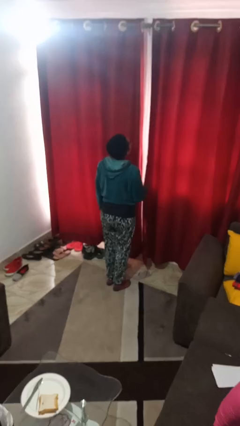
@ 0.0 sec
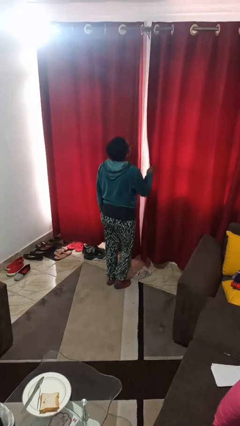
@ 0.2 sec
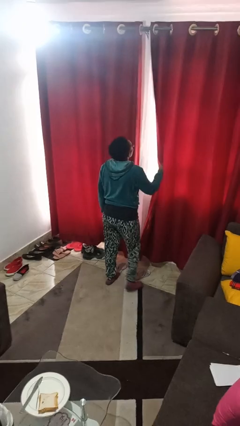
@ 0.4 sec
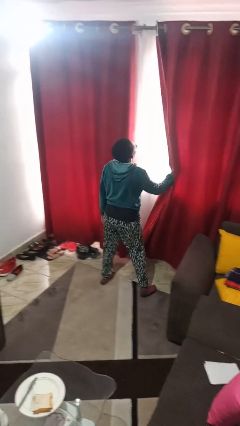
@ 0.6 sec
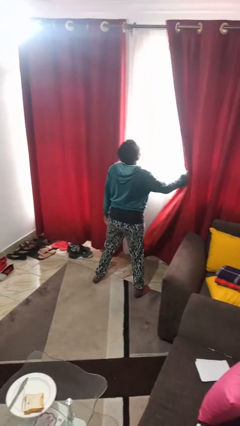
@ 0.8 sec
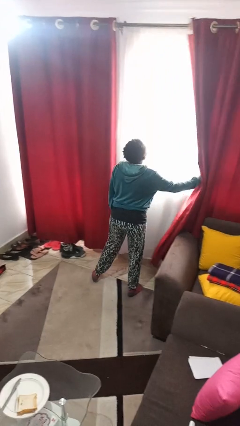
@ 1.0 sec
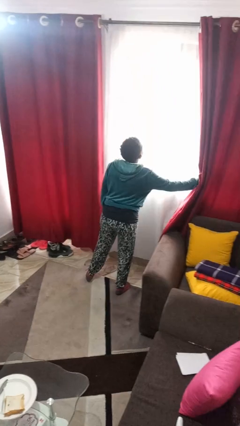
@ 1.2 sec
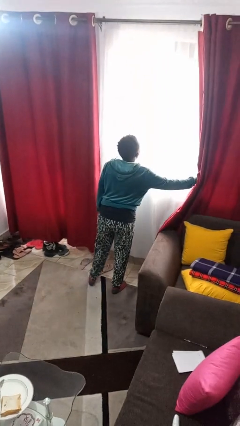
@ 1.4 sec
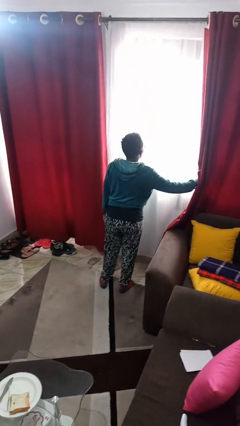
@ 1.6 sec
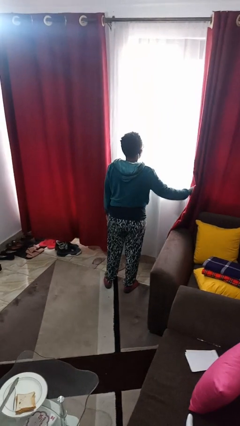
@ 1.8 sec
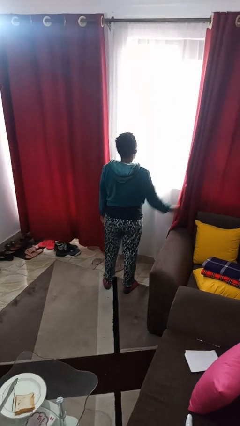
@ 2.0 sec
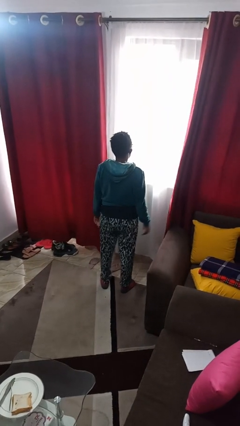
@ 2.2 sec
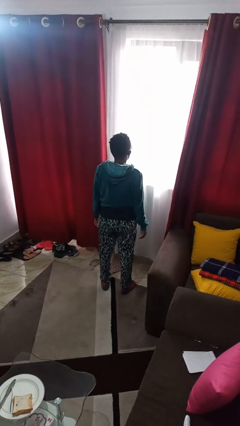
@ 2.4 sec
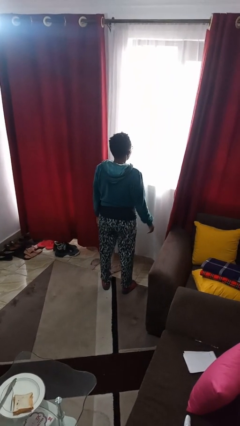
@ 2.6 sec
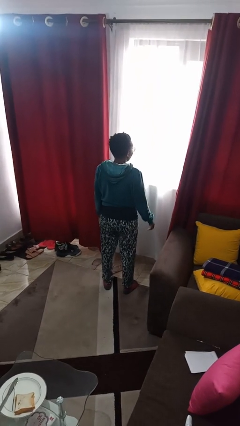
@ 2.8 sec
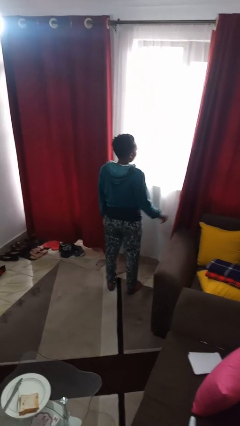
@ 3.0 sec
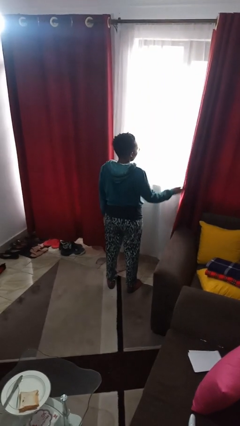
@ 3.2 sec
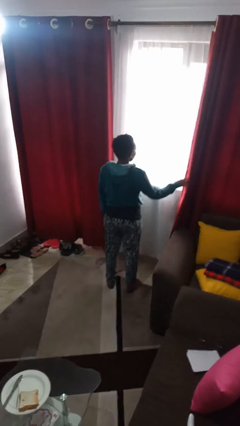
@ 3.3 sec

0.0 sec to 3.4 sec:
person opens curtains

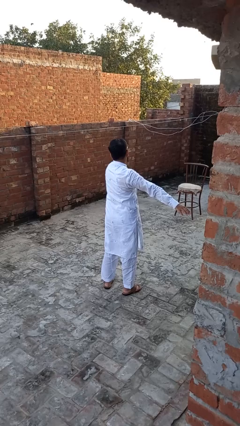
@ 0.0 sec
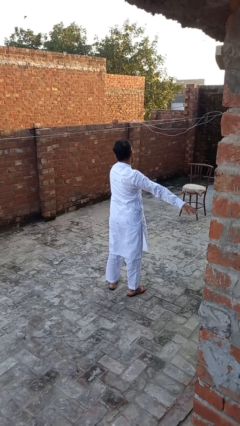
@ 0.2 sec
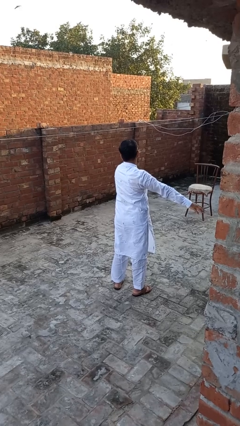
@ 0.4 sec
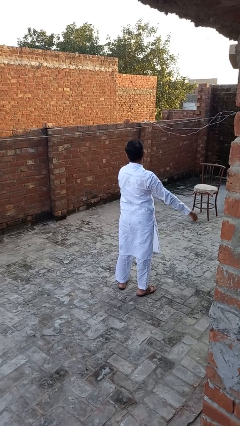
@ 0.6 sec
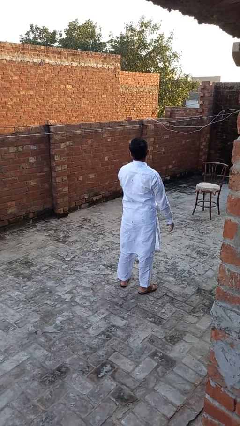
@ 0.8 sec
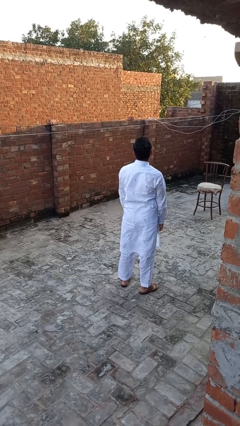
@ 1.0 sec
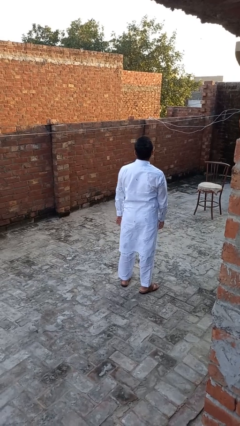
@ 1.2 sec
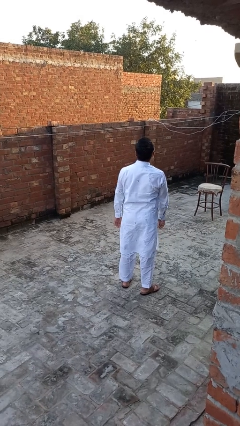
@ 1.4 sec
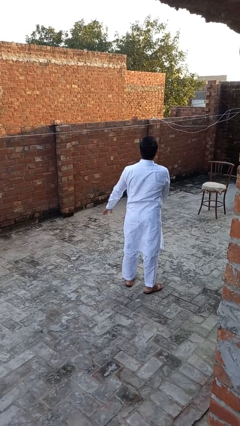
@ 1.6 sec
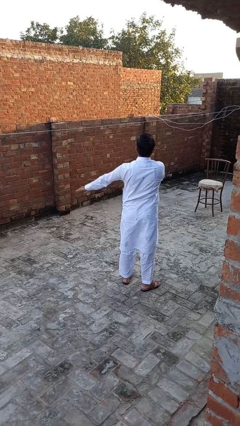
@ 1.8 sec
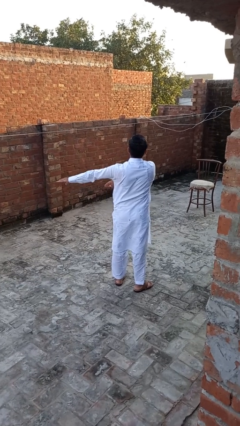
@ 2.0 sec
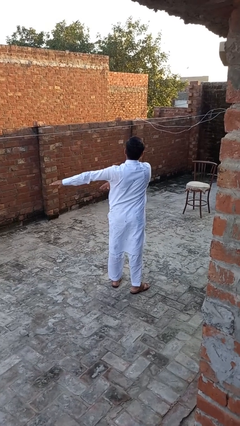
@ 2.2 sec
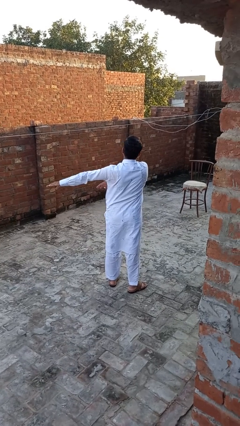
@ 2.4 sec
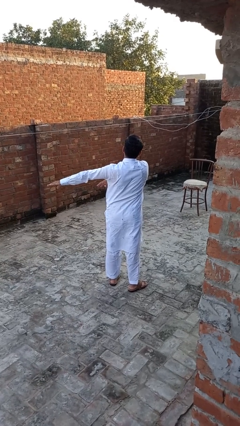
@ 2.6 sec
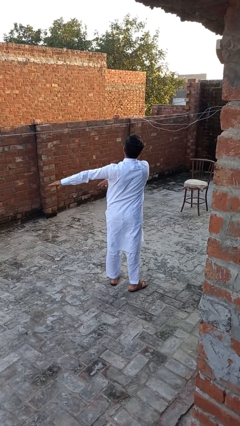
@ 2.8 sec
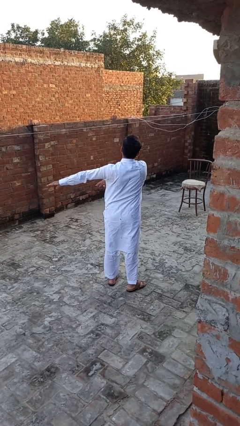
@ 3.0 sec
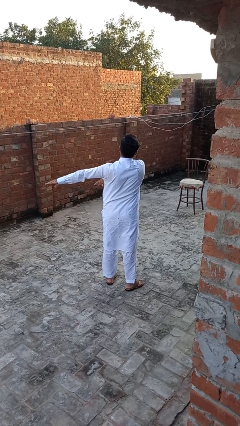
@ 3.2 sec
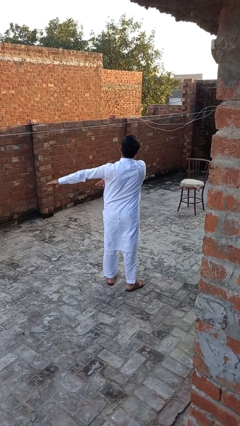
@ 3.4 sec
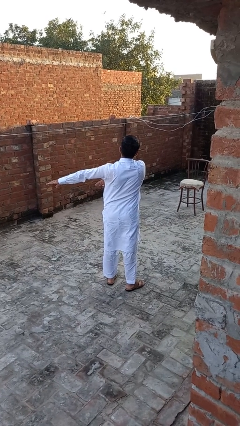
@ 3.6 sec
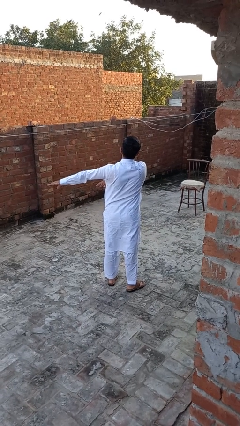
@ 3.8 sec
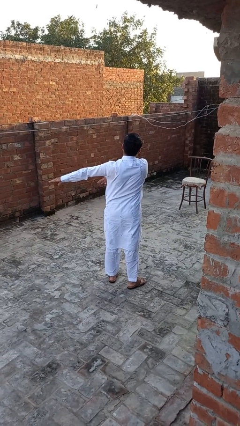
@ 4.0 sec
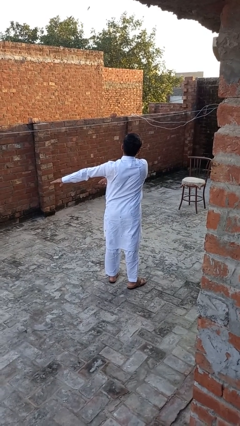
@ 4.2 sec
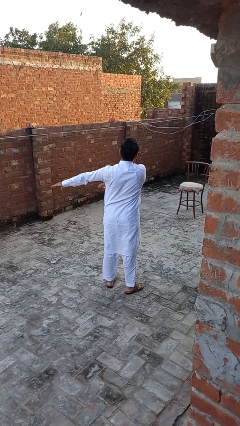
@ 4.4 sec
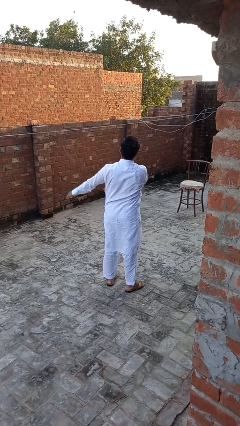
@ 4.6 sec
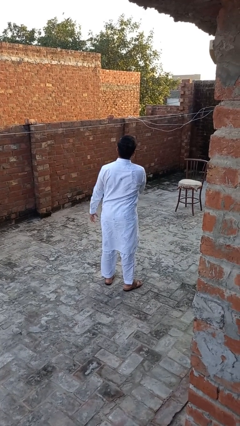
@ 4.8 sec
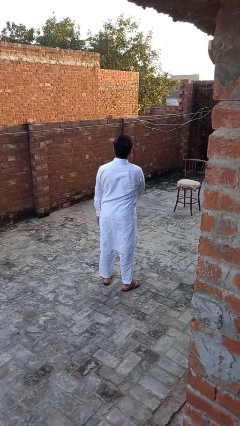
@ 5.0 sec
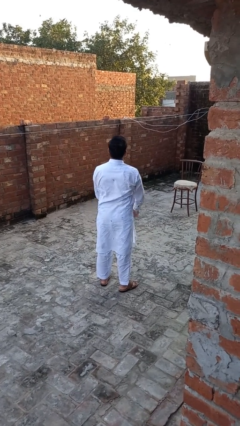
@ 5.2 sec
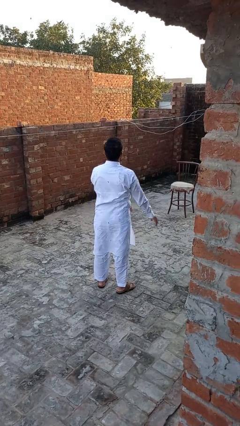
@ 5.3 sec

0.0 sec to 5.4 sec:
person gestures swipe left

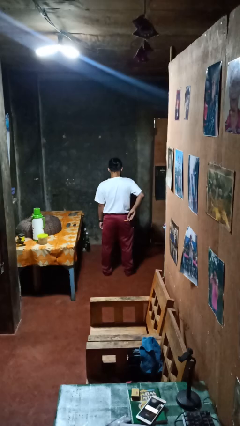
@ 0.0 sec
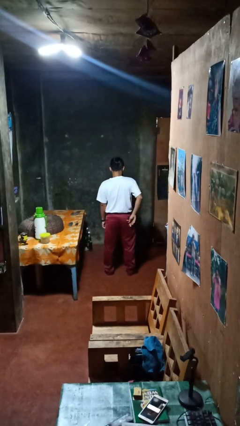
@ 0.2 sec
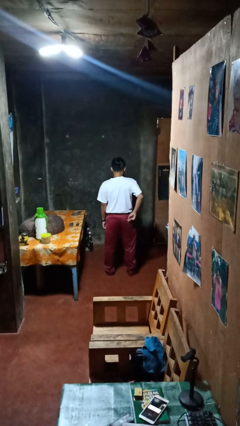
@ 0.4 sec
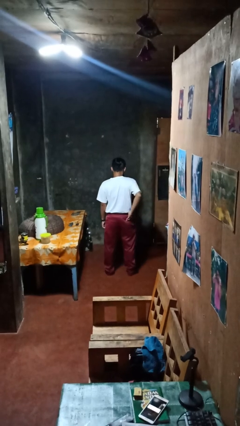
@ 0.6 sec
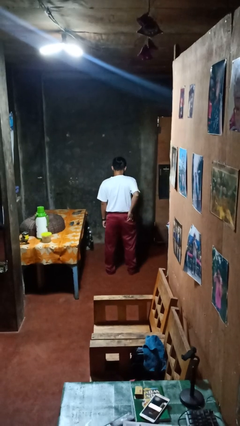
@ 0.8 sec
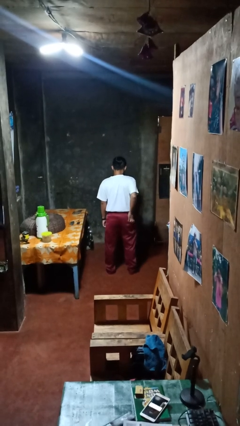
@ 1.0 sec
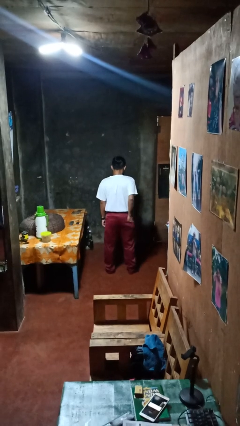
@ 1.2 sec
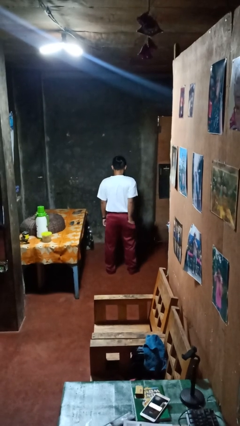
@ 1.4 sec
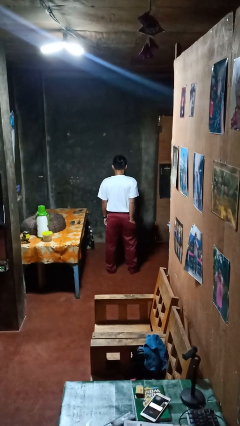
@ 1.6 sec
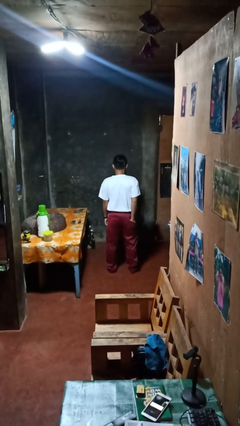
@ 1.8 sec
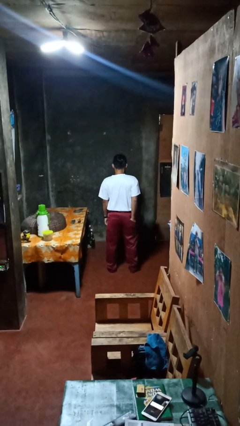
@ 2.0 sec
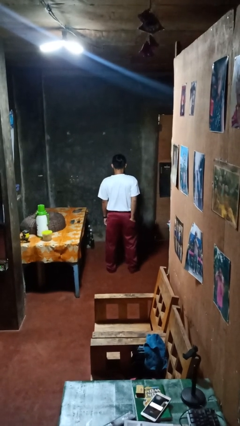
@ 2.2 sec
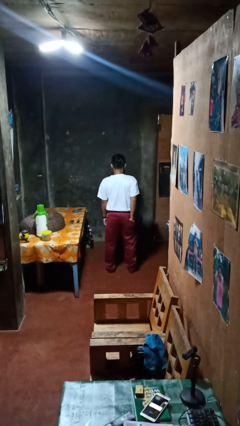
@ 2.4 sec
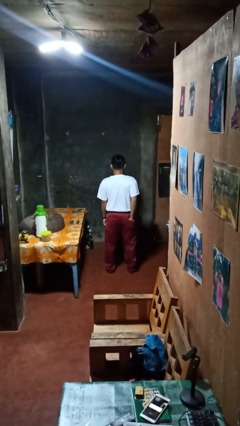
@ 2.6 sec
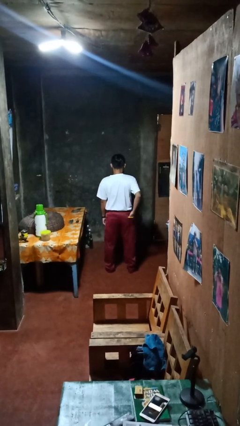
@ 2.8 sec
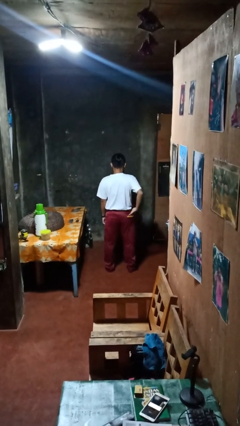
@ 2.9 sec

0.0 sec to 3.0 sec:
person puts hands in back pockets

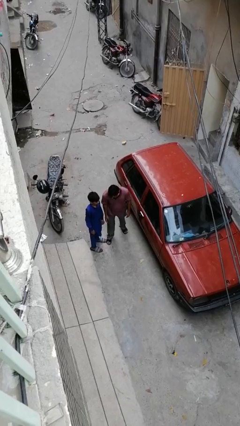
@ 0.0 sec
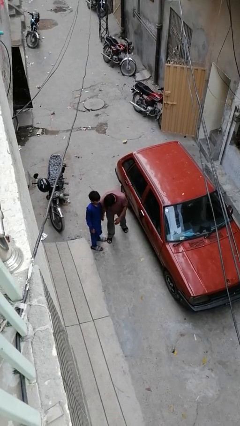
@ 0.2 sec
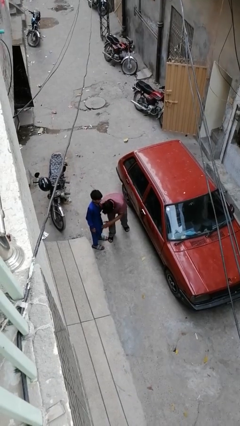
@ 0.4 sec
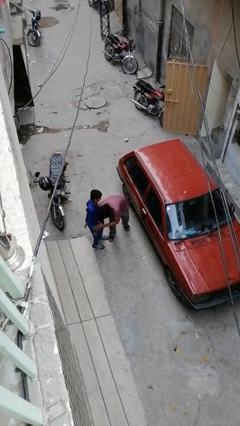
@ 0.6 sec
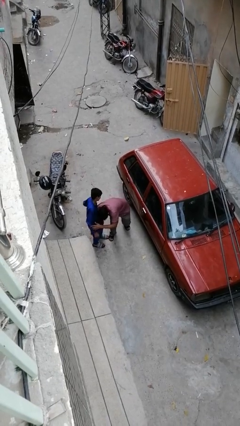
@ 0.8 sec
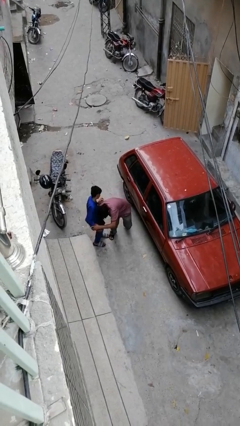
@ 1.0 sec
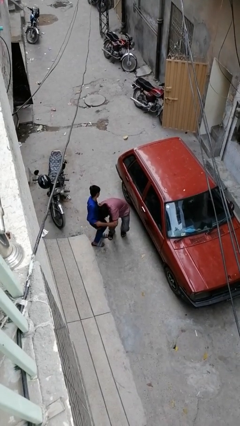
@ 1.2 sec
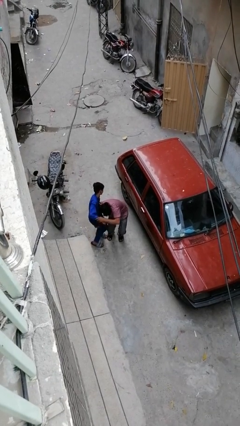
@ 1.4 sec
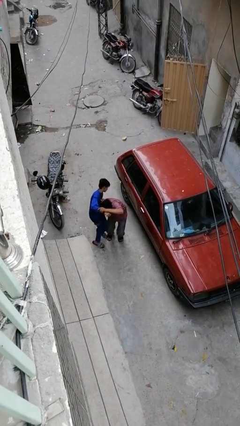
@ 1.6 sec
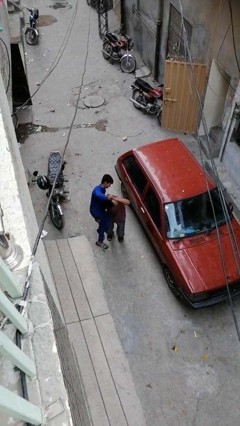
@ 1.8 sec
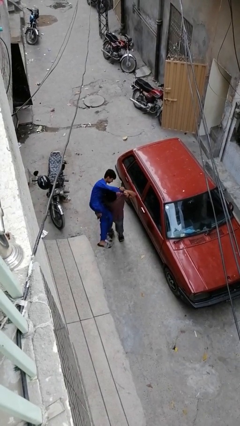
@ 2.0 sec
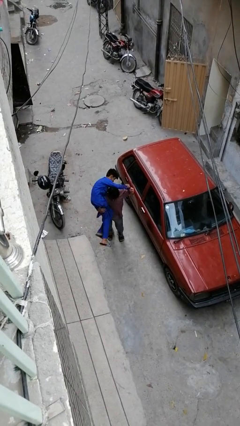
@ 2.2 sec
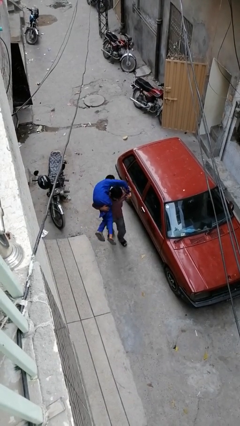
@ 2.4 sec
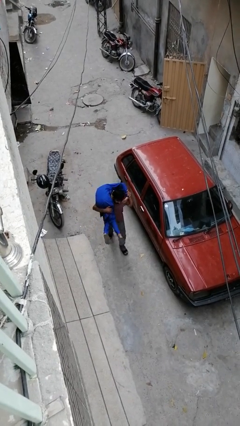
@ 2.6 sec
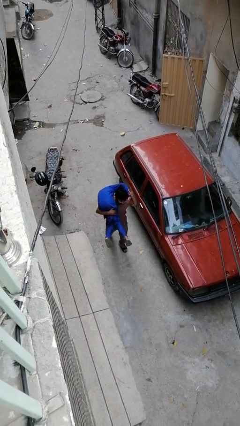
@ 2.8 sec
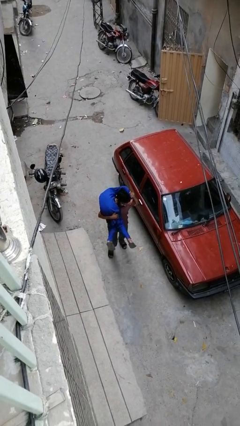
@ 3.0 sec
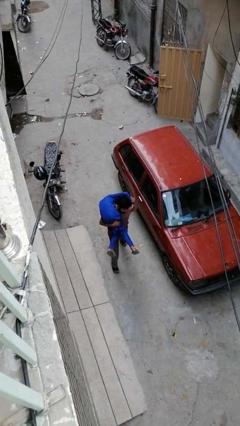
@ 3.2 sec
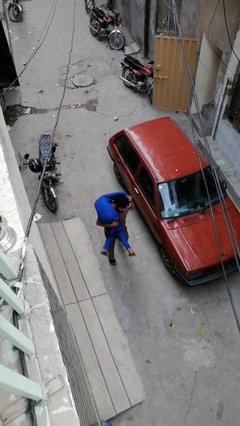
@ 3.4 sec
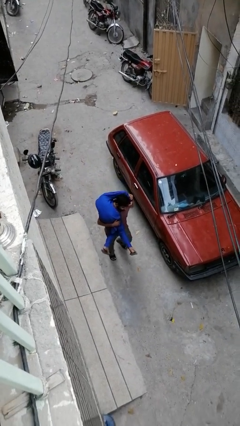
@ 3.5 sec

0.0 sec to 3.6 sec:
person carries person over shoulder

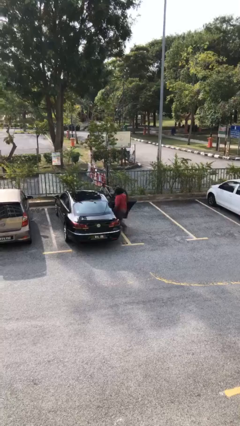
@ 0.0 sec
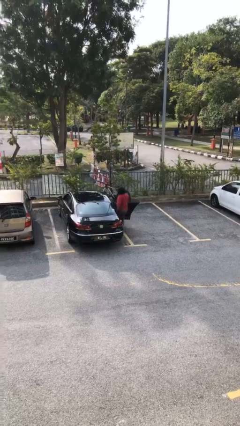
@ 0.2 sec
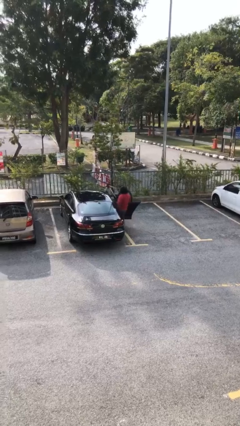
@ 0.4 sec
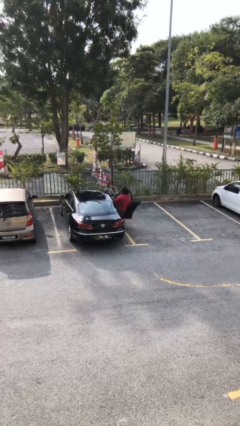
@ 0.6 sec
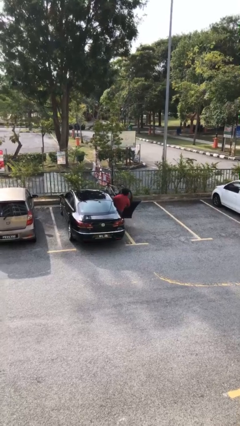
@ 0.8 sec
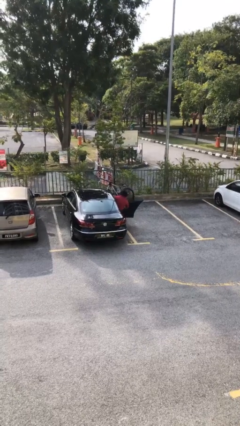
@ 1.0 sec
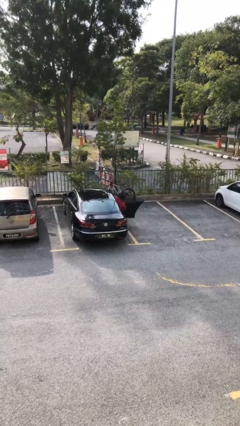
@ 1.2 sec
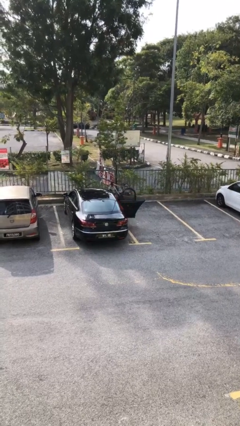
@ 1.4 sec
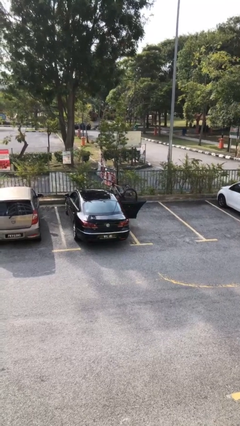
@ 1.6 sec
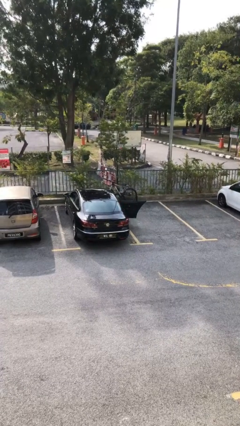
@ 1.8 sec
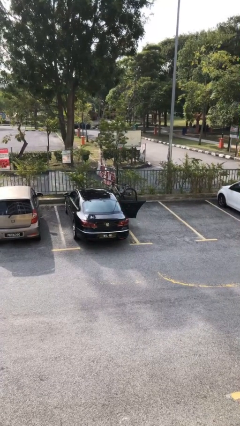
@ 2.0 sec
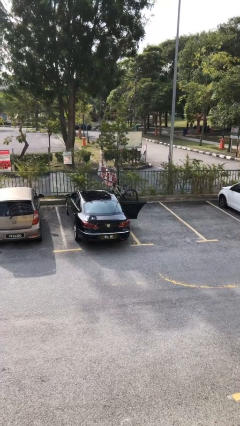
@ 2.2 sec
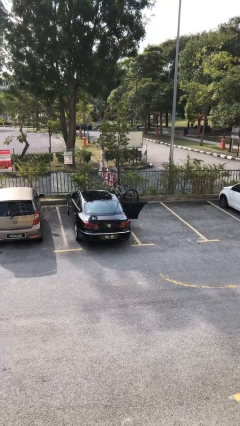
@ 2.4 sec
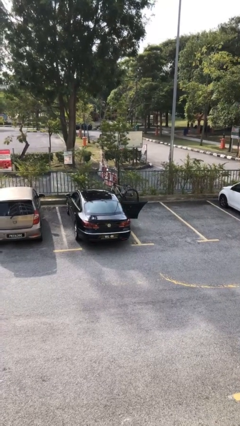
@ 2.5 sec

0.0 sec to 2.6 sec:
person enters car
